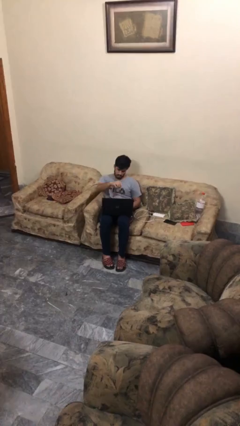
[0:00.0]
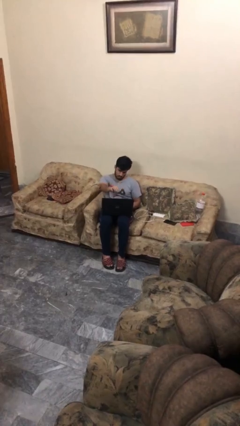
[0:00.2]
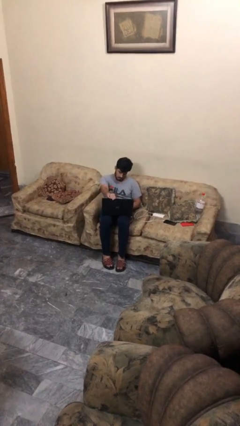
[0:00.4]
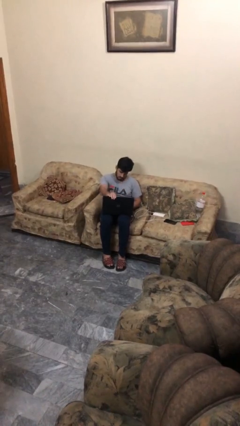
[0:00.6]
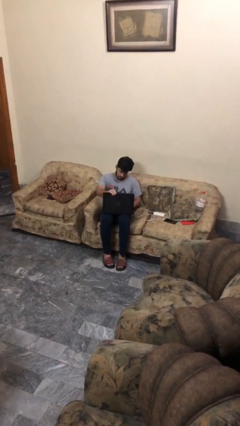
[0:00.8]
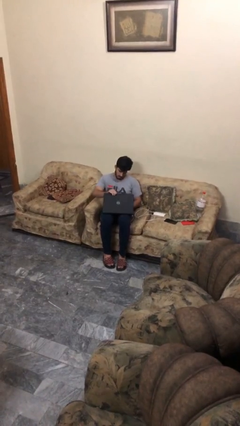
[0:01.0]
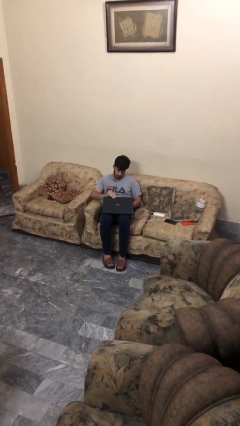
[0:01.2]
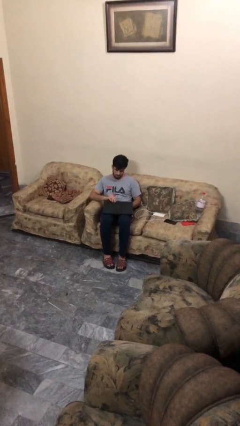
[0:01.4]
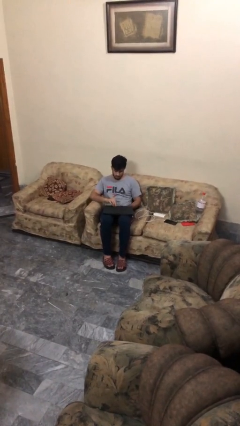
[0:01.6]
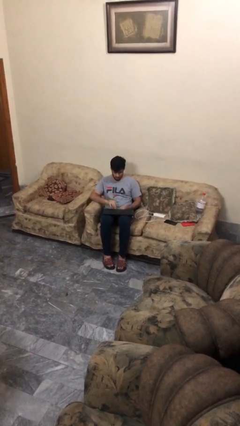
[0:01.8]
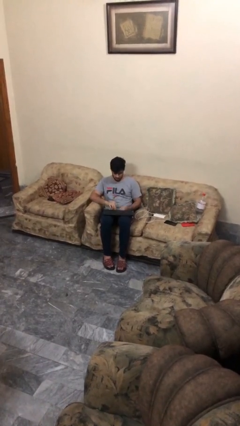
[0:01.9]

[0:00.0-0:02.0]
person closes laptop

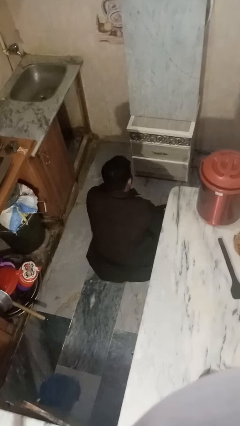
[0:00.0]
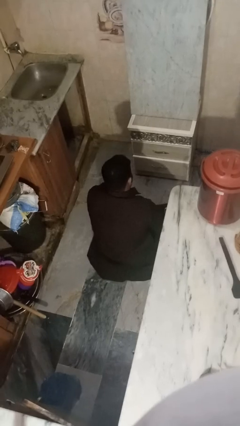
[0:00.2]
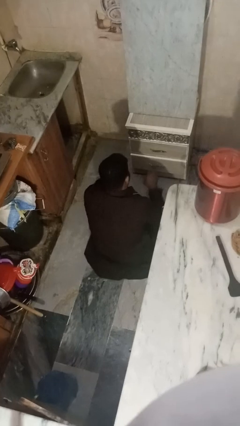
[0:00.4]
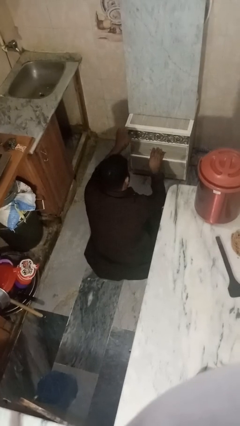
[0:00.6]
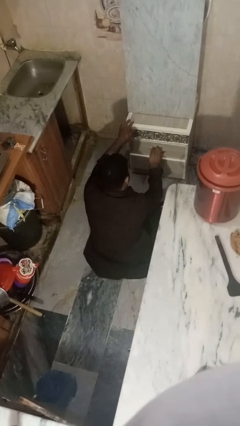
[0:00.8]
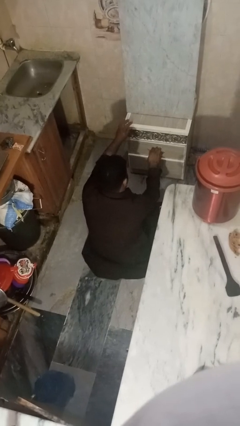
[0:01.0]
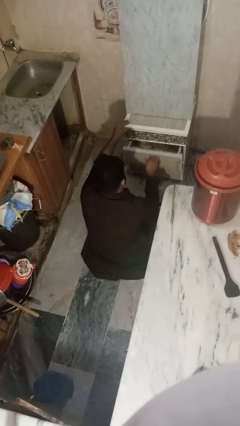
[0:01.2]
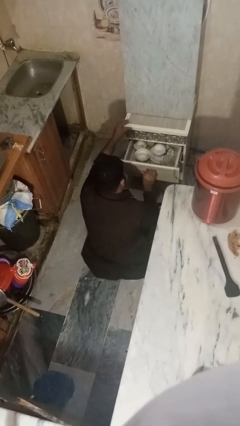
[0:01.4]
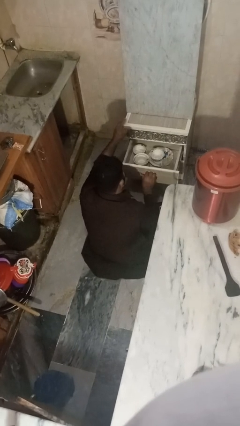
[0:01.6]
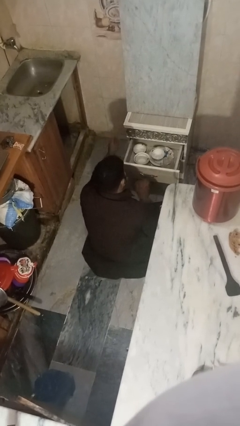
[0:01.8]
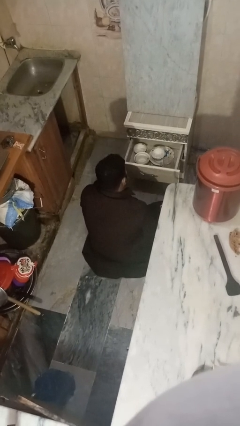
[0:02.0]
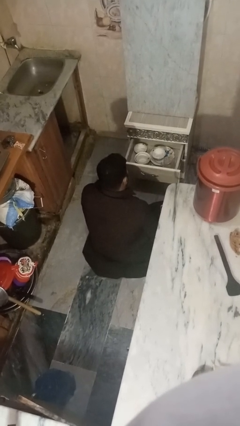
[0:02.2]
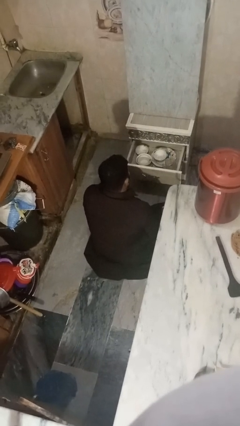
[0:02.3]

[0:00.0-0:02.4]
person opens kitchen drawer

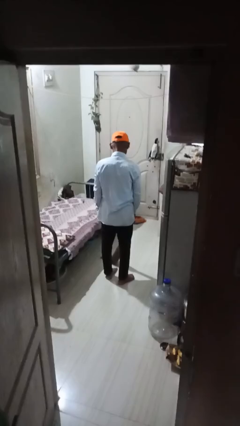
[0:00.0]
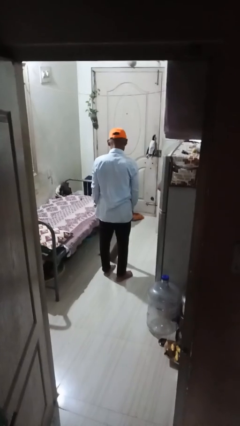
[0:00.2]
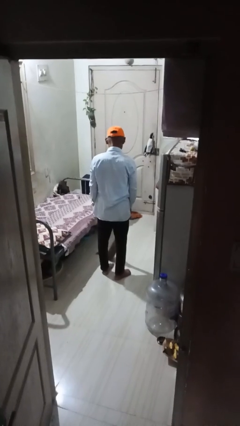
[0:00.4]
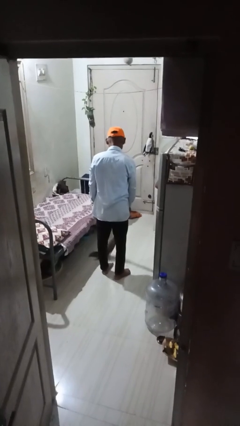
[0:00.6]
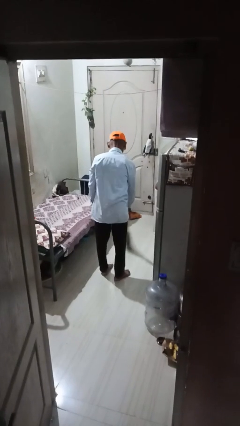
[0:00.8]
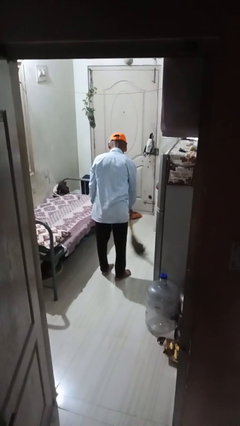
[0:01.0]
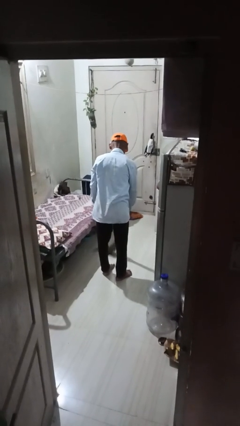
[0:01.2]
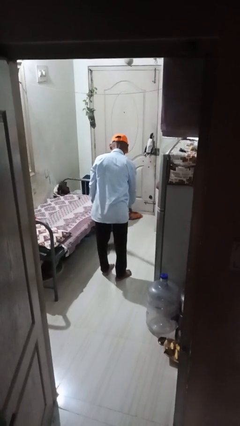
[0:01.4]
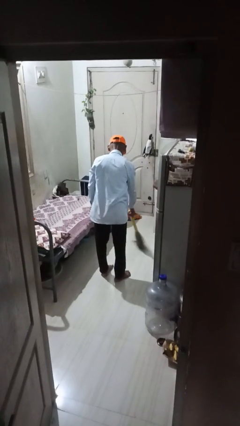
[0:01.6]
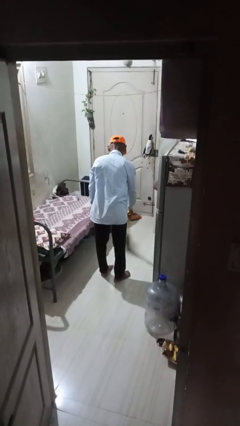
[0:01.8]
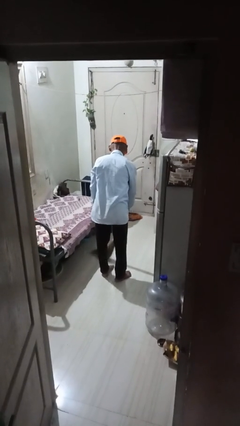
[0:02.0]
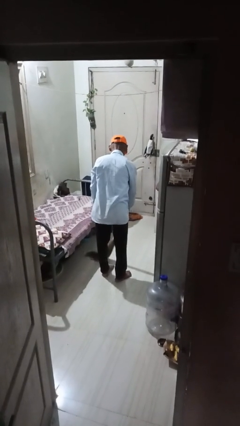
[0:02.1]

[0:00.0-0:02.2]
person mops

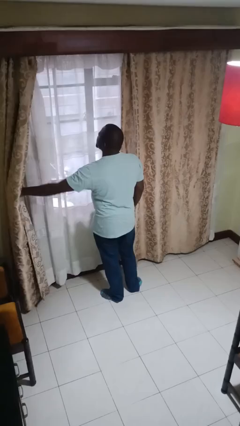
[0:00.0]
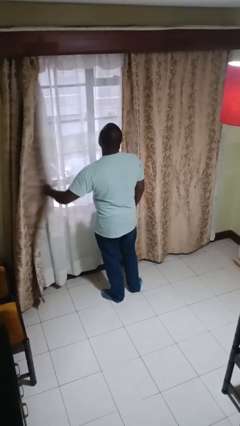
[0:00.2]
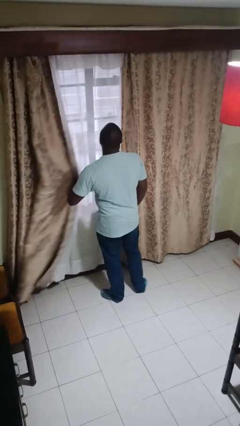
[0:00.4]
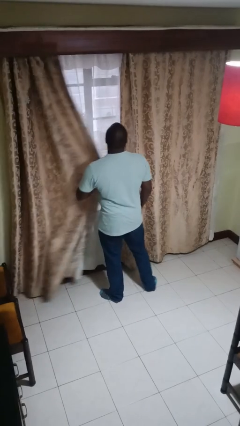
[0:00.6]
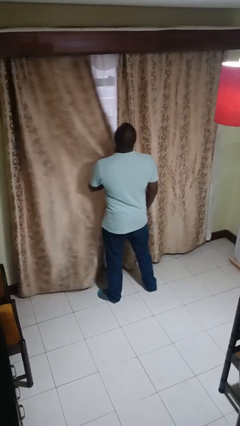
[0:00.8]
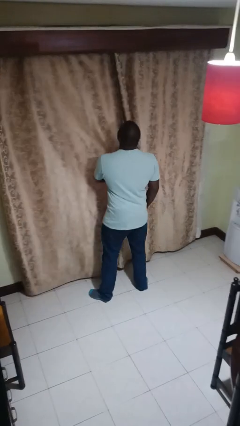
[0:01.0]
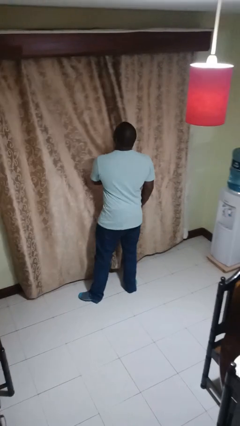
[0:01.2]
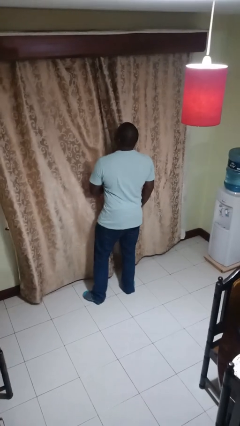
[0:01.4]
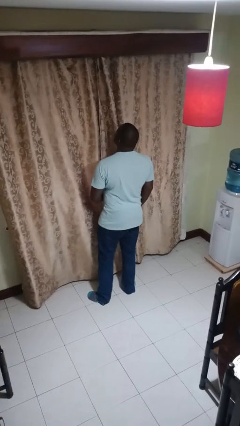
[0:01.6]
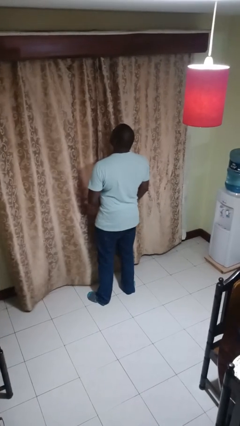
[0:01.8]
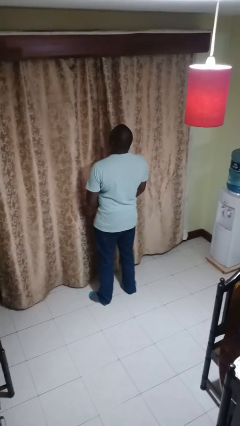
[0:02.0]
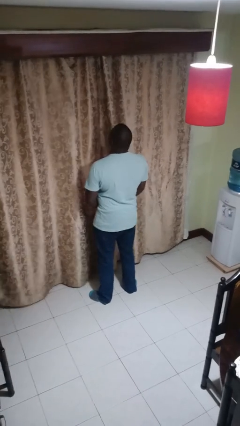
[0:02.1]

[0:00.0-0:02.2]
person closes curtains

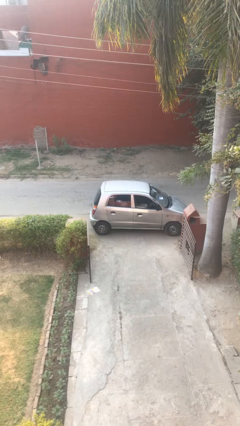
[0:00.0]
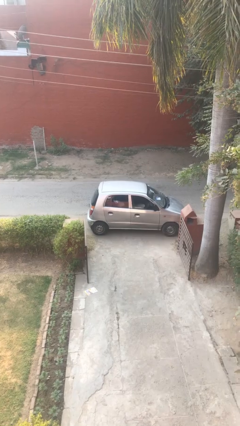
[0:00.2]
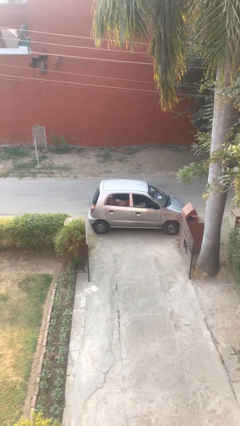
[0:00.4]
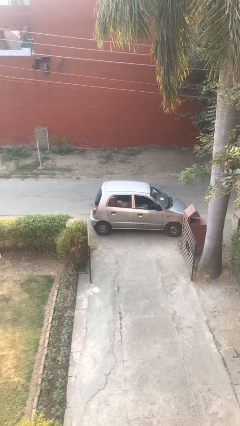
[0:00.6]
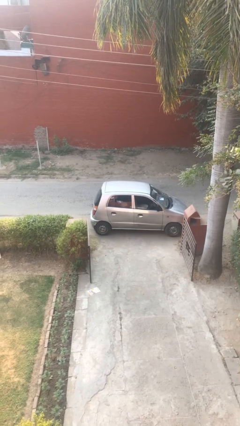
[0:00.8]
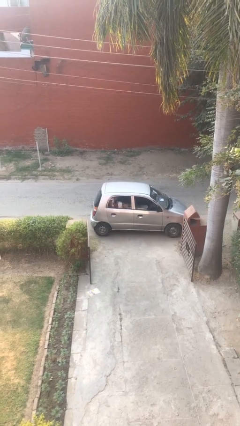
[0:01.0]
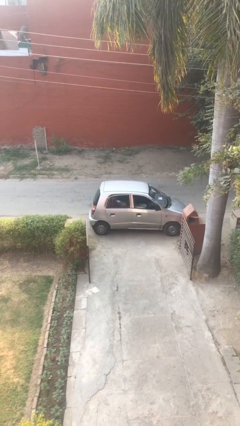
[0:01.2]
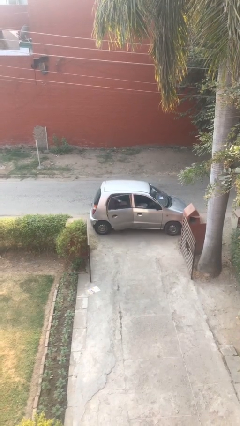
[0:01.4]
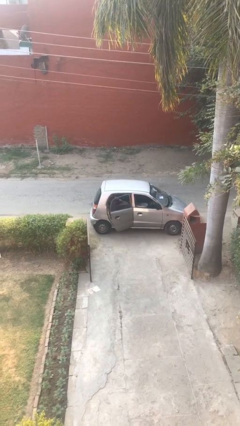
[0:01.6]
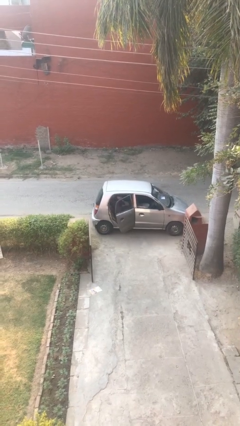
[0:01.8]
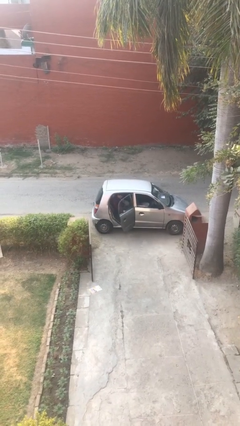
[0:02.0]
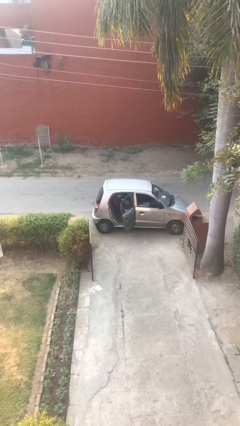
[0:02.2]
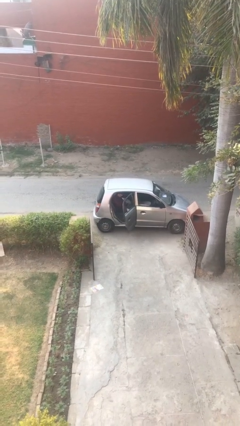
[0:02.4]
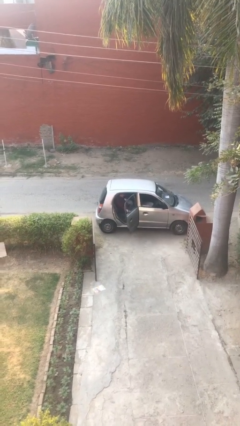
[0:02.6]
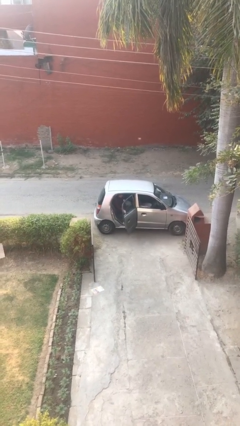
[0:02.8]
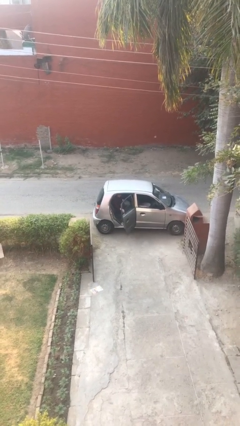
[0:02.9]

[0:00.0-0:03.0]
person opens car door

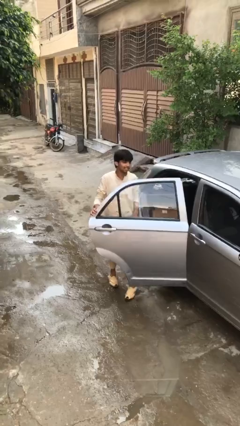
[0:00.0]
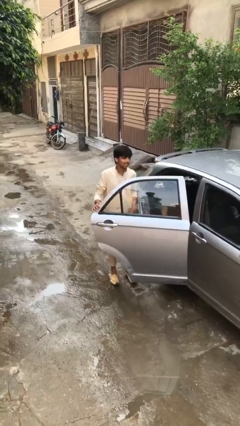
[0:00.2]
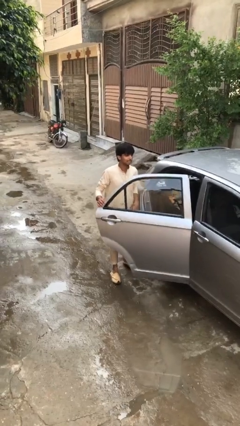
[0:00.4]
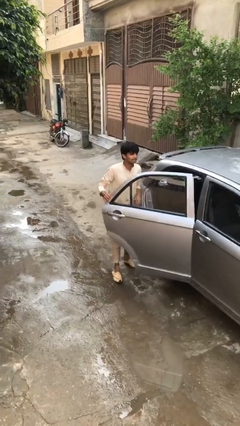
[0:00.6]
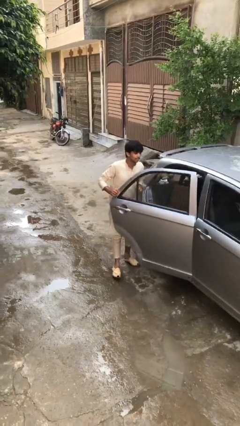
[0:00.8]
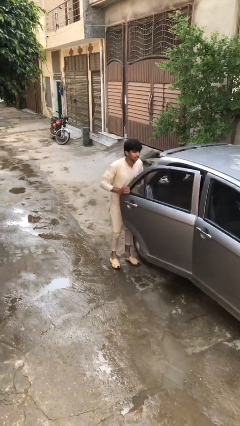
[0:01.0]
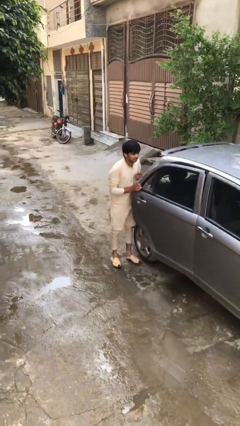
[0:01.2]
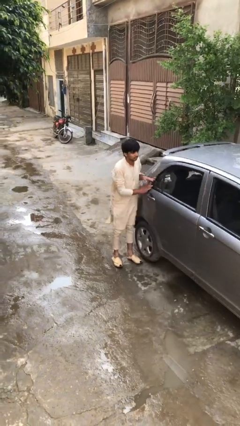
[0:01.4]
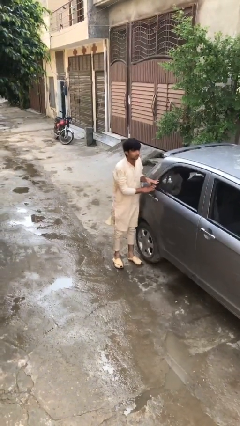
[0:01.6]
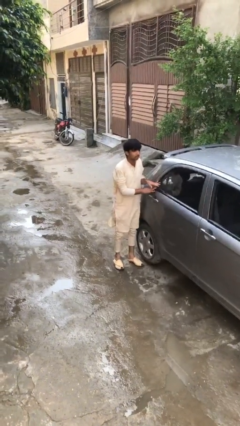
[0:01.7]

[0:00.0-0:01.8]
person closes car door

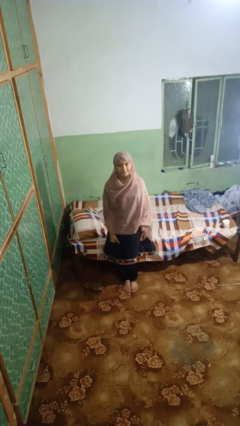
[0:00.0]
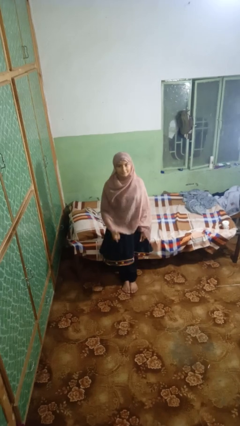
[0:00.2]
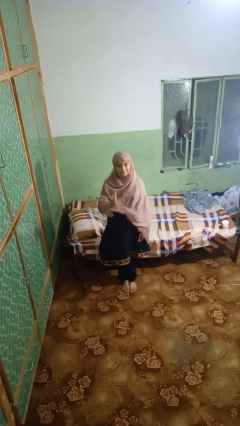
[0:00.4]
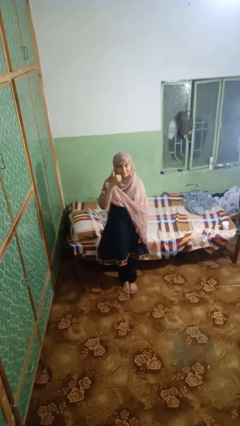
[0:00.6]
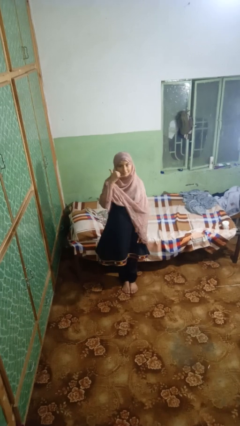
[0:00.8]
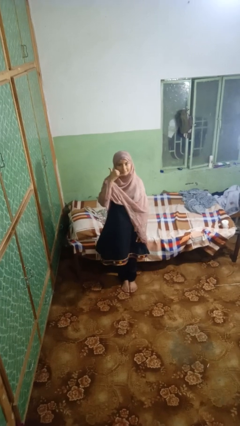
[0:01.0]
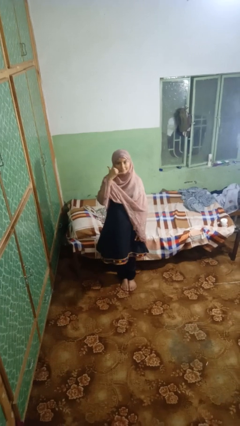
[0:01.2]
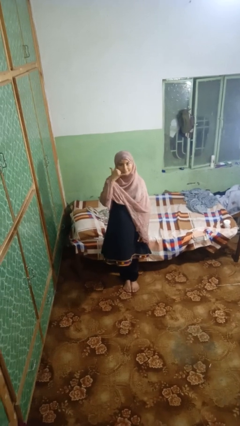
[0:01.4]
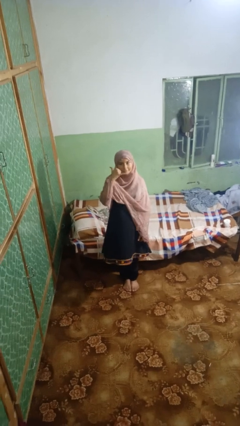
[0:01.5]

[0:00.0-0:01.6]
person gestures call me

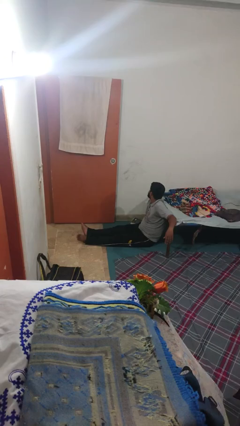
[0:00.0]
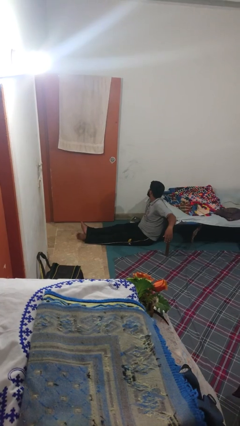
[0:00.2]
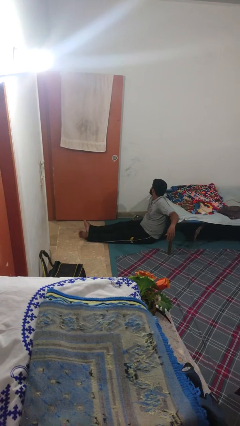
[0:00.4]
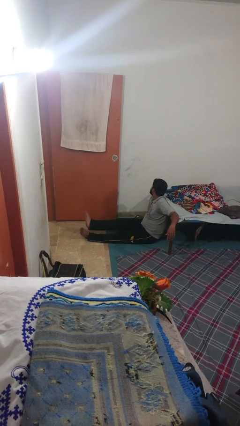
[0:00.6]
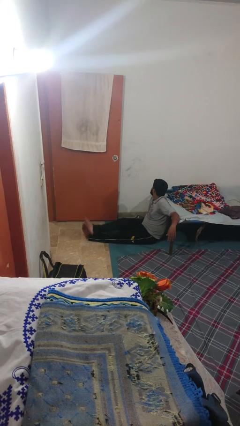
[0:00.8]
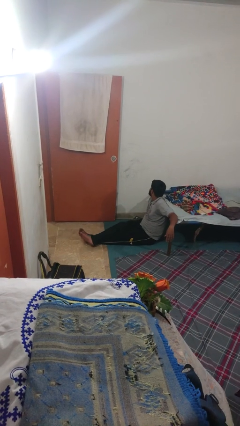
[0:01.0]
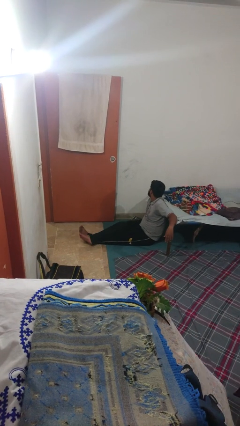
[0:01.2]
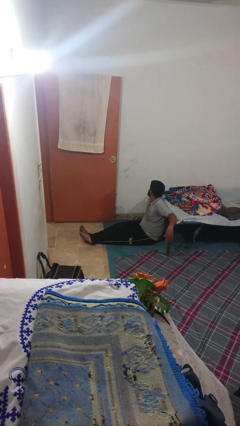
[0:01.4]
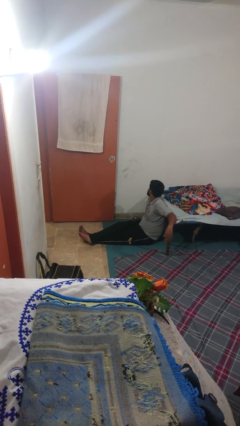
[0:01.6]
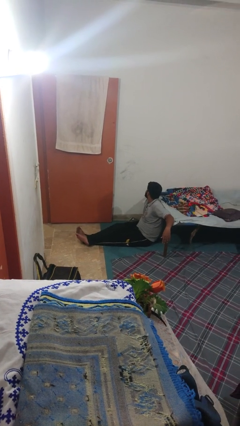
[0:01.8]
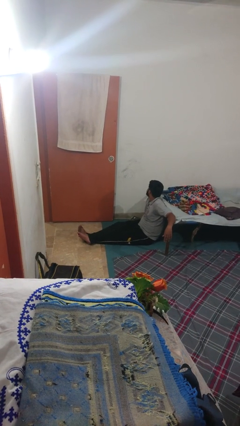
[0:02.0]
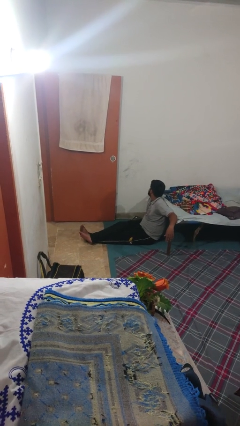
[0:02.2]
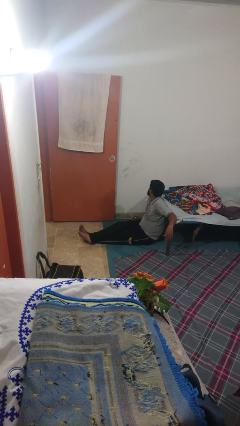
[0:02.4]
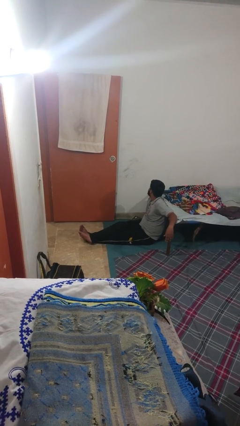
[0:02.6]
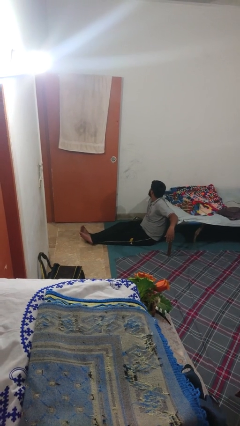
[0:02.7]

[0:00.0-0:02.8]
person crosses legs
